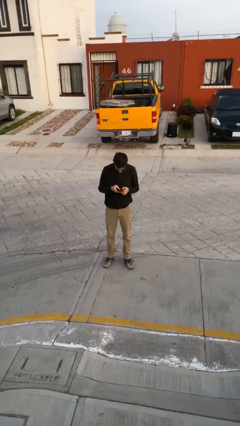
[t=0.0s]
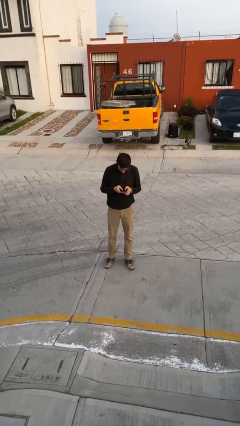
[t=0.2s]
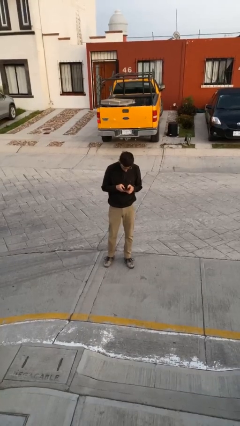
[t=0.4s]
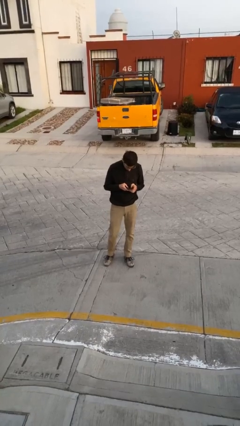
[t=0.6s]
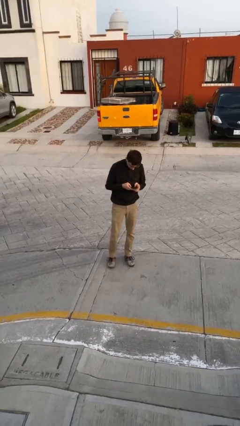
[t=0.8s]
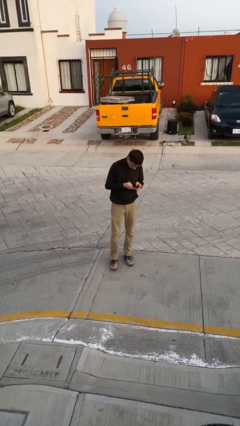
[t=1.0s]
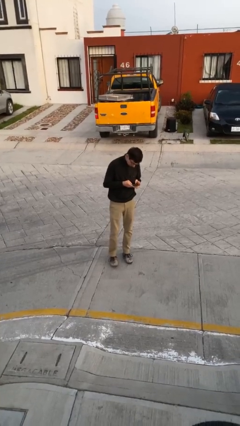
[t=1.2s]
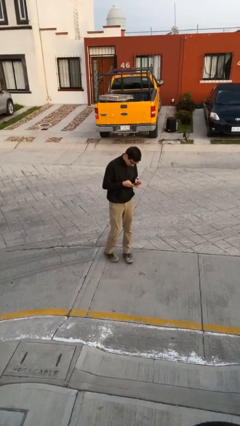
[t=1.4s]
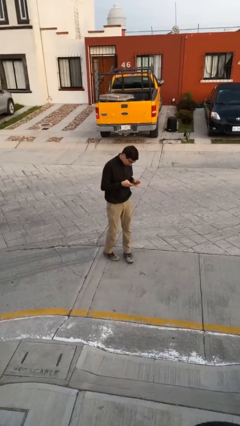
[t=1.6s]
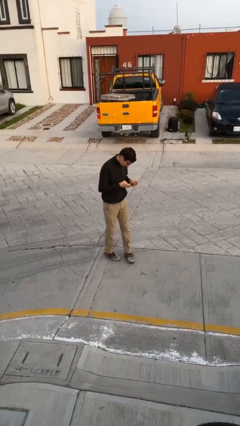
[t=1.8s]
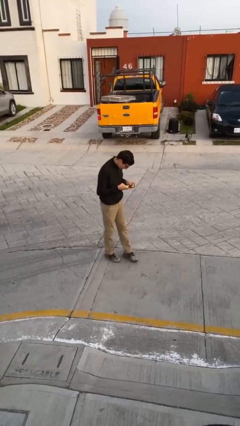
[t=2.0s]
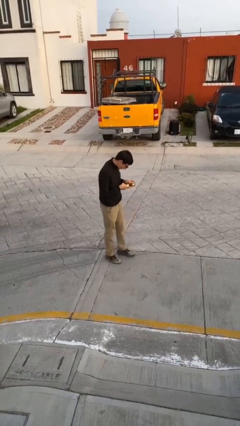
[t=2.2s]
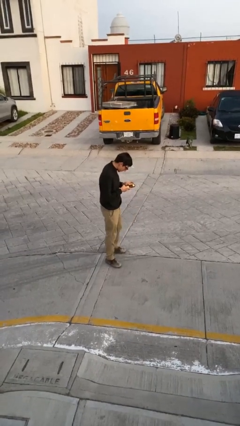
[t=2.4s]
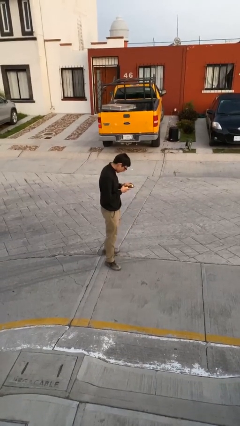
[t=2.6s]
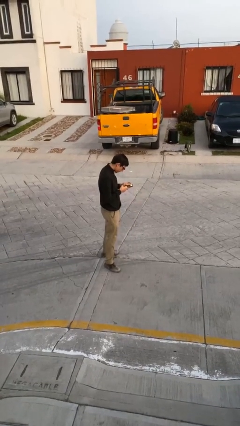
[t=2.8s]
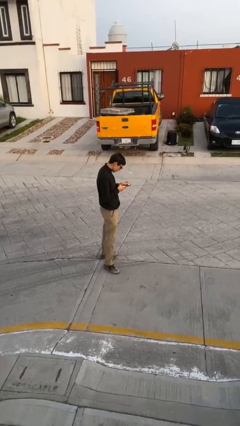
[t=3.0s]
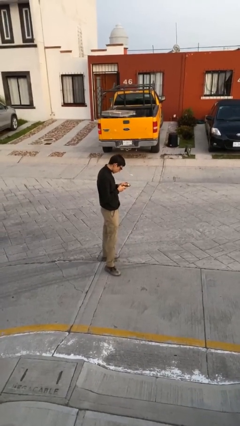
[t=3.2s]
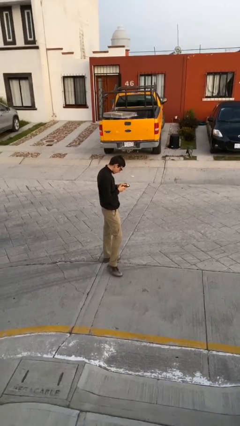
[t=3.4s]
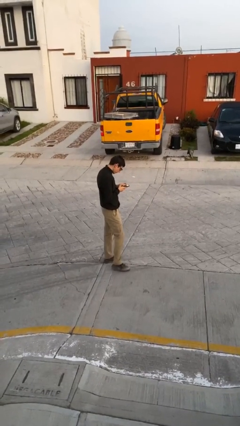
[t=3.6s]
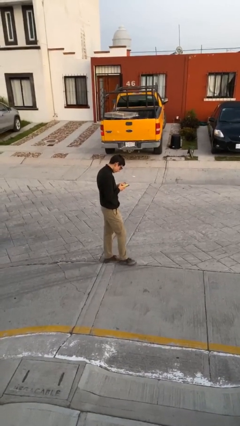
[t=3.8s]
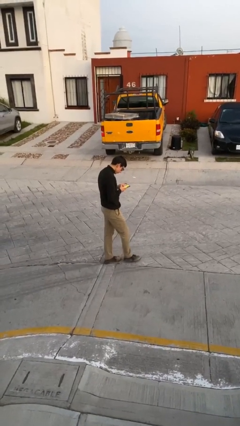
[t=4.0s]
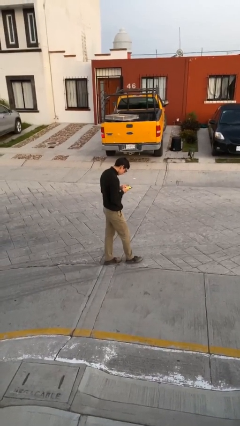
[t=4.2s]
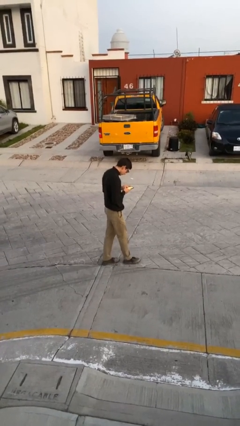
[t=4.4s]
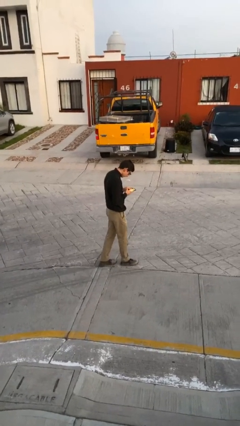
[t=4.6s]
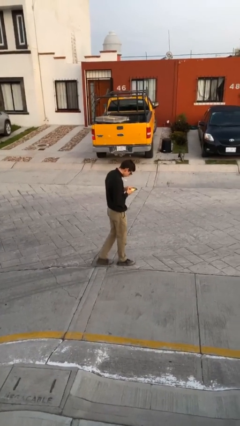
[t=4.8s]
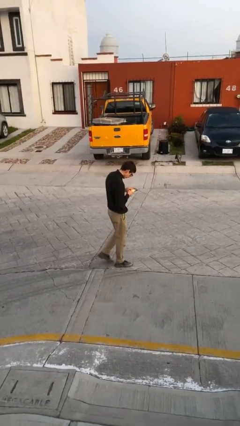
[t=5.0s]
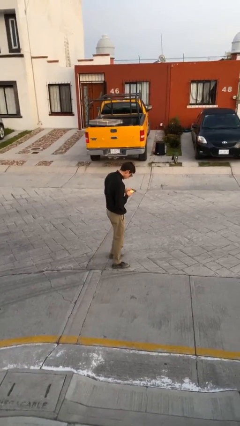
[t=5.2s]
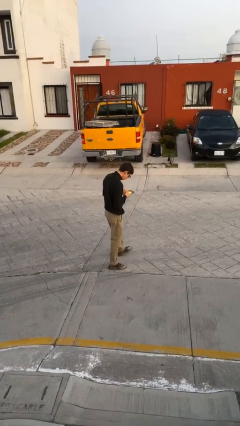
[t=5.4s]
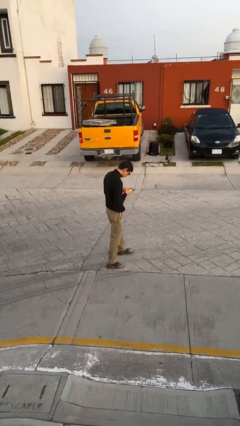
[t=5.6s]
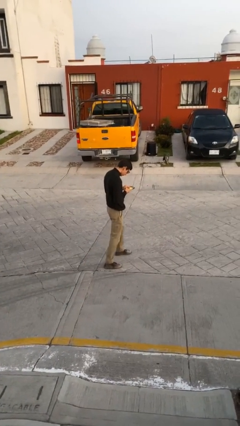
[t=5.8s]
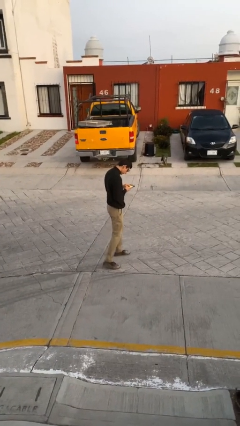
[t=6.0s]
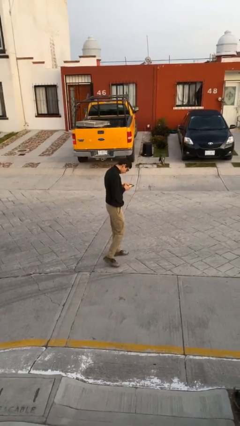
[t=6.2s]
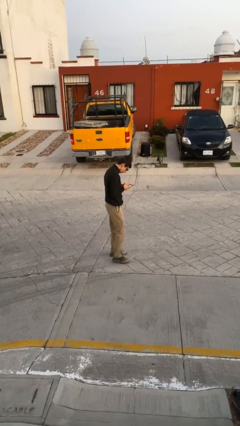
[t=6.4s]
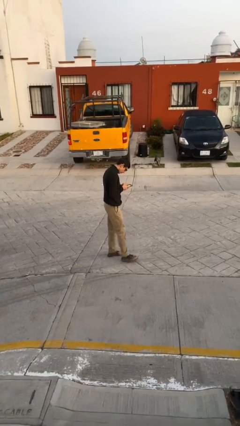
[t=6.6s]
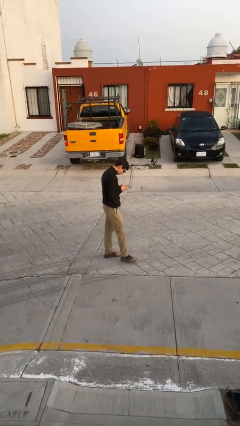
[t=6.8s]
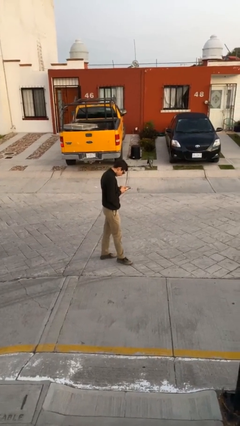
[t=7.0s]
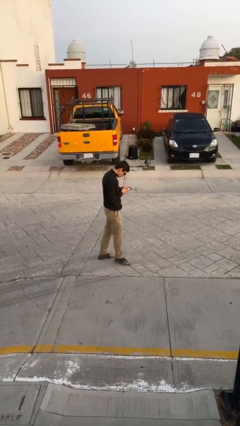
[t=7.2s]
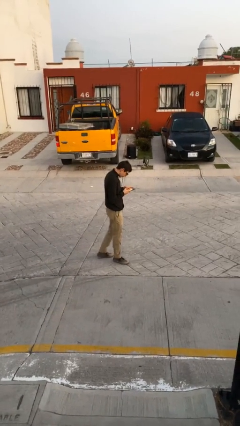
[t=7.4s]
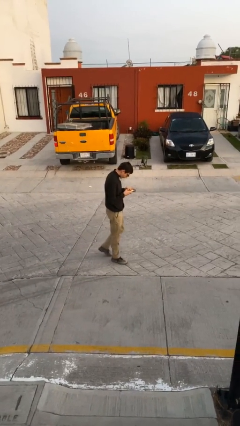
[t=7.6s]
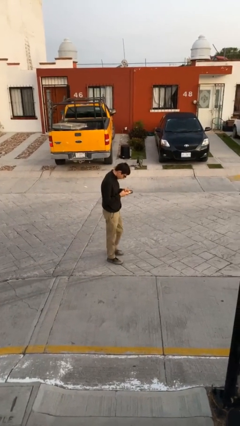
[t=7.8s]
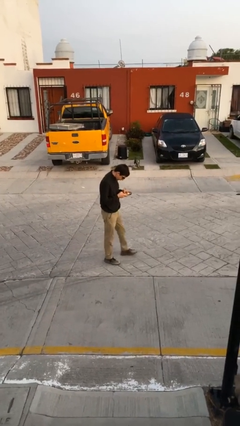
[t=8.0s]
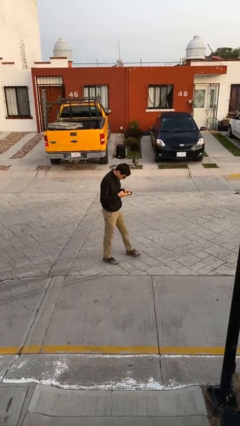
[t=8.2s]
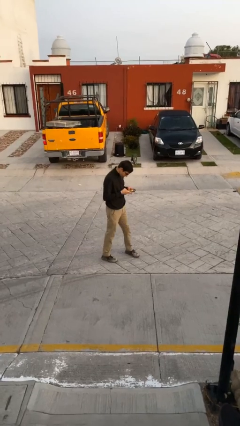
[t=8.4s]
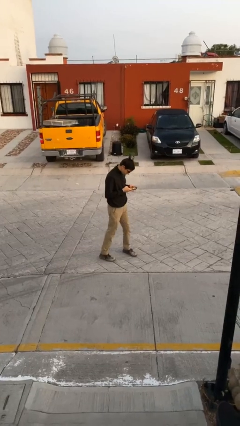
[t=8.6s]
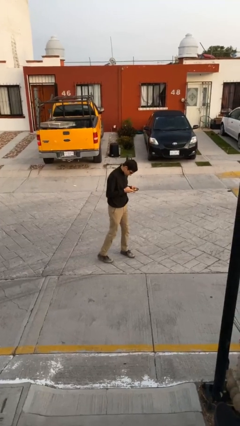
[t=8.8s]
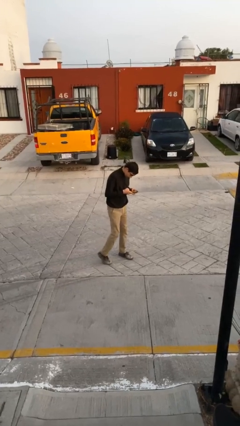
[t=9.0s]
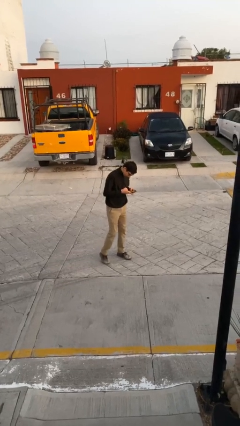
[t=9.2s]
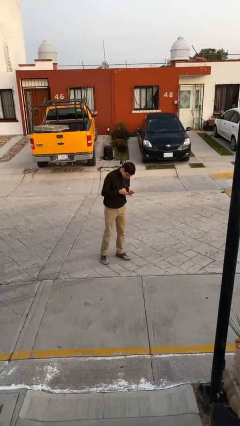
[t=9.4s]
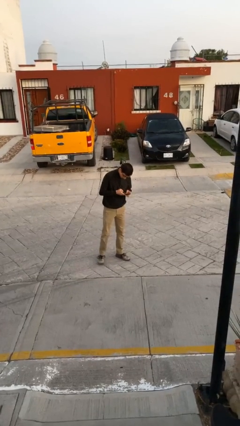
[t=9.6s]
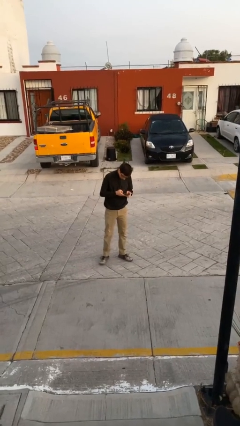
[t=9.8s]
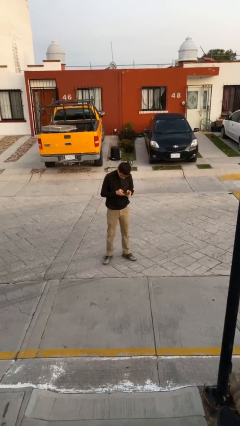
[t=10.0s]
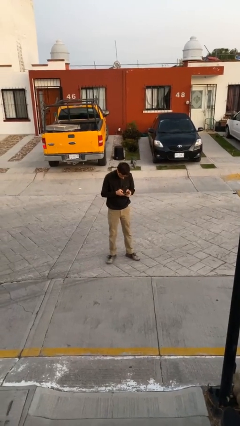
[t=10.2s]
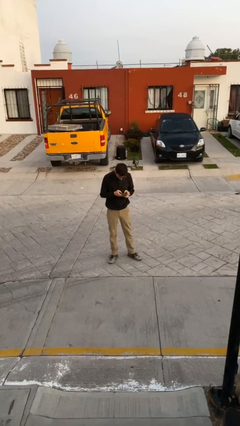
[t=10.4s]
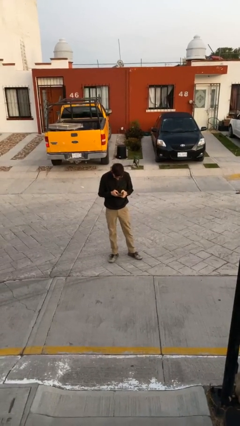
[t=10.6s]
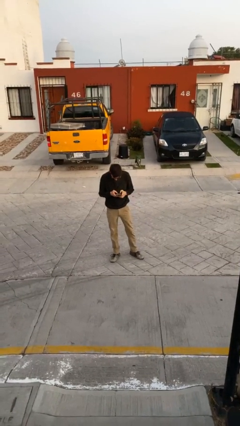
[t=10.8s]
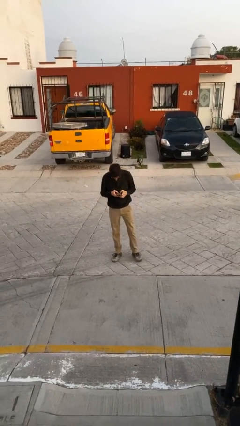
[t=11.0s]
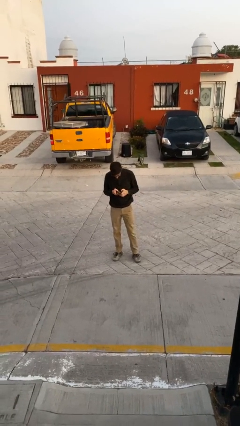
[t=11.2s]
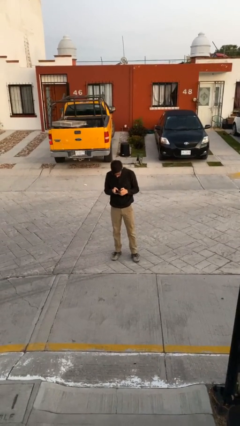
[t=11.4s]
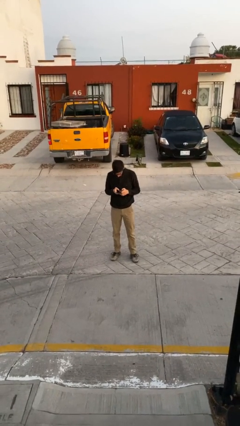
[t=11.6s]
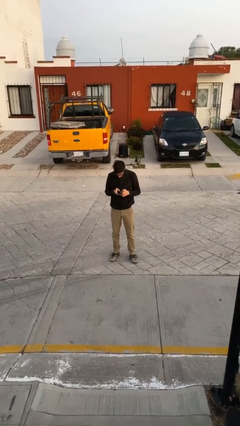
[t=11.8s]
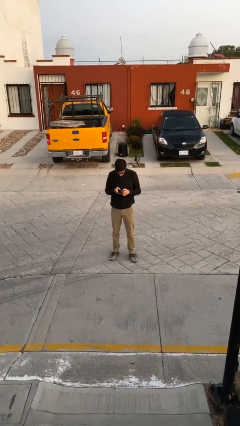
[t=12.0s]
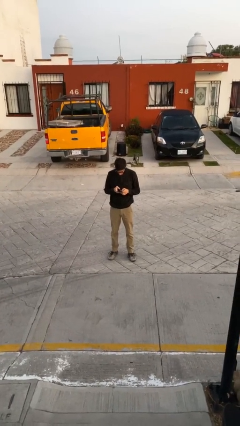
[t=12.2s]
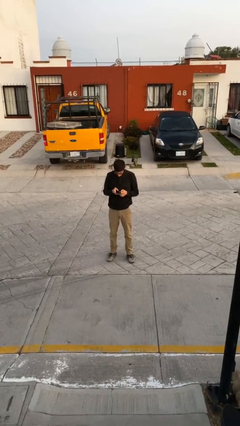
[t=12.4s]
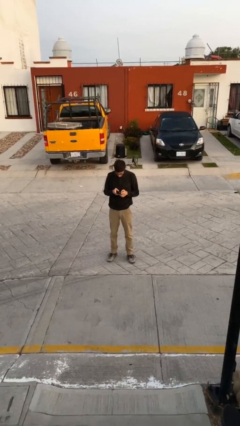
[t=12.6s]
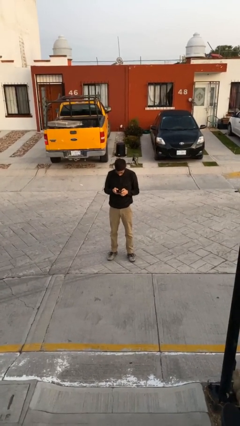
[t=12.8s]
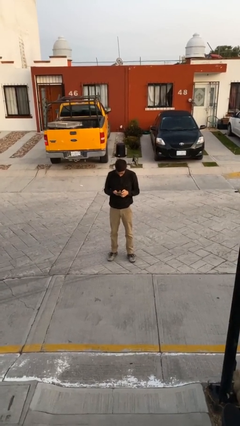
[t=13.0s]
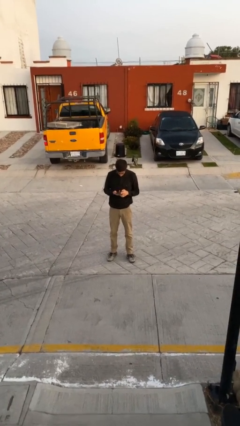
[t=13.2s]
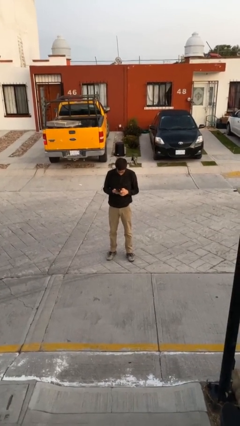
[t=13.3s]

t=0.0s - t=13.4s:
person texts on phone

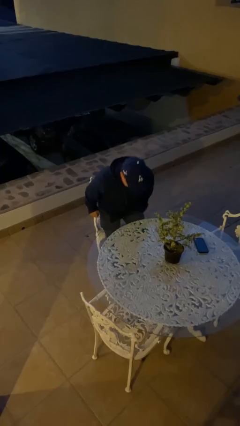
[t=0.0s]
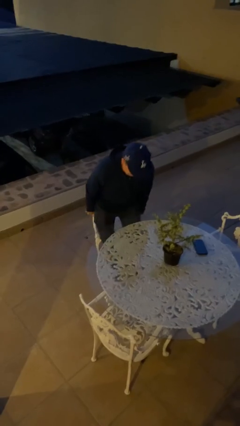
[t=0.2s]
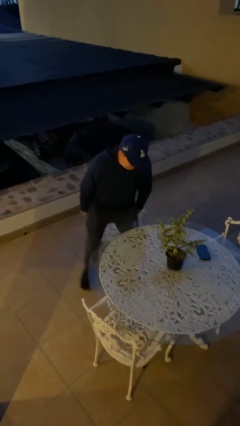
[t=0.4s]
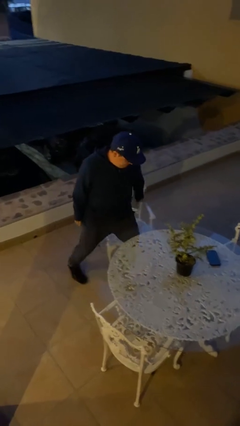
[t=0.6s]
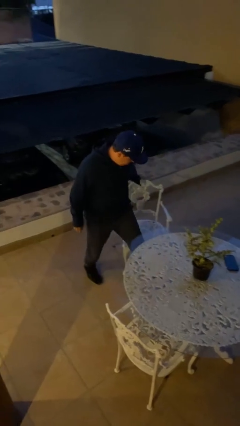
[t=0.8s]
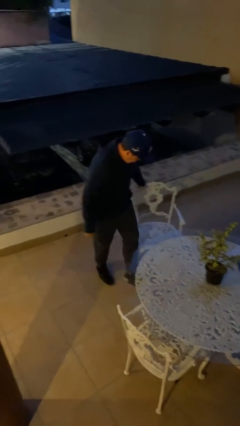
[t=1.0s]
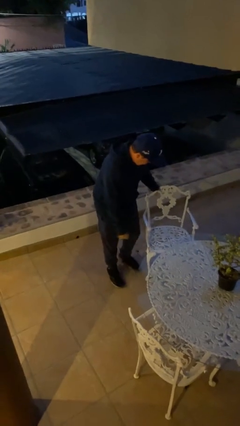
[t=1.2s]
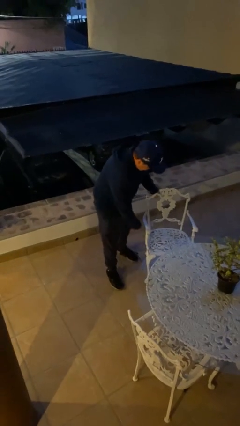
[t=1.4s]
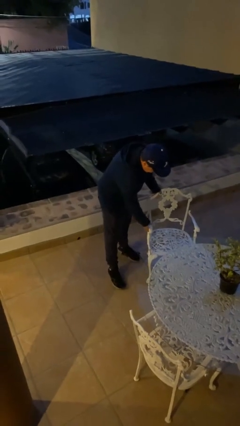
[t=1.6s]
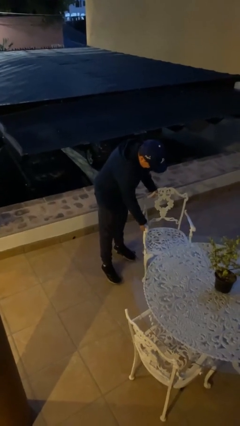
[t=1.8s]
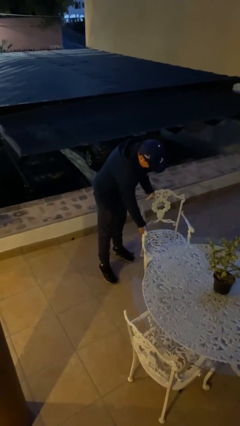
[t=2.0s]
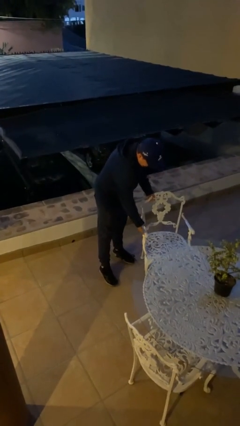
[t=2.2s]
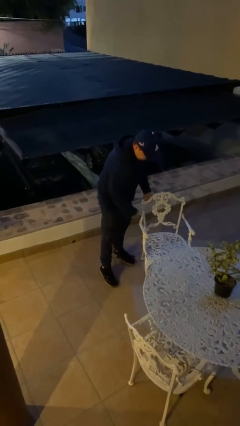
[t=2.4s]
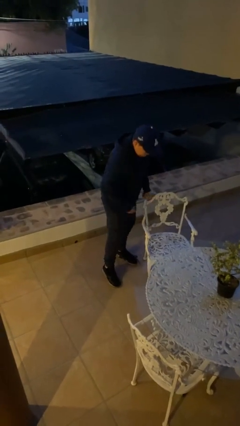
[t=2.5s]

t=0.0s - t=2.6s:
person stands up

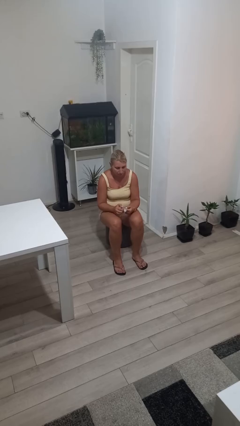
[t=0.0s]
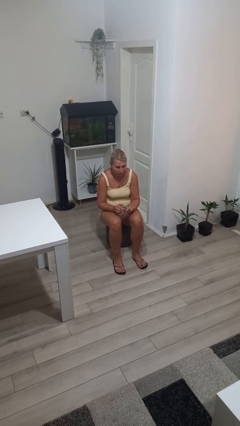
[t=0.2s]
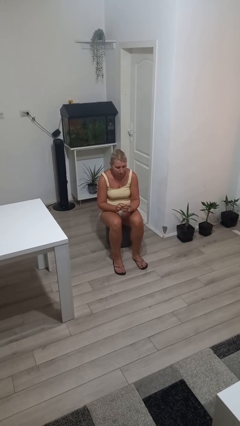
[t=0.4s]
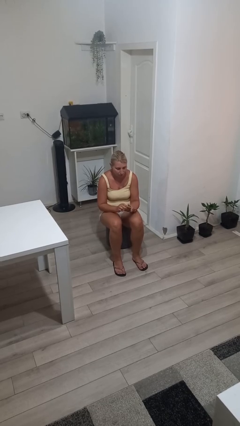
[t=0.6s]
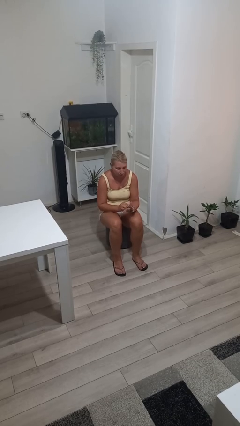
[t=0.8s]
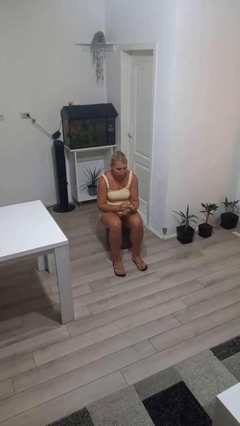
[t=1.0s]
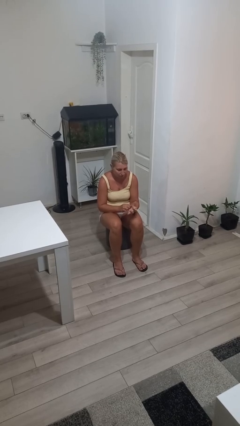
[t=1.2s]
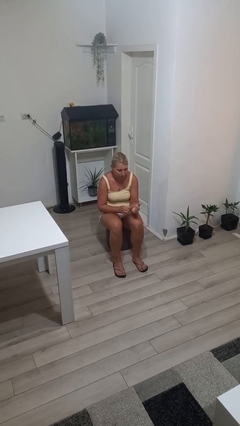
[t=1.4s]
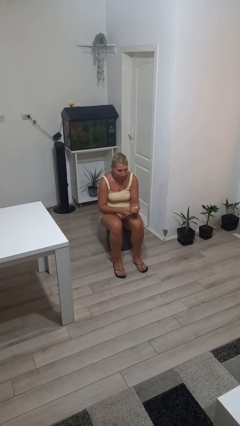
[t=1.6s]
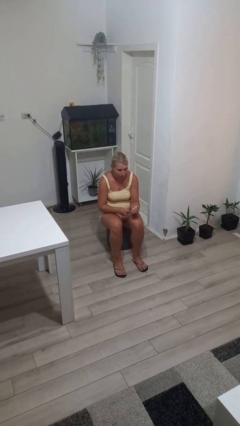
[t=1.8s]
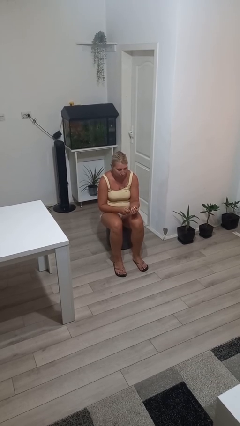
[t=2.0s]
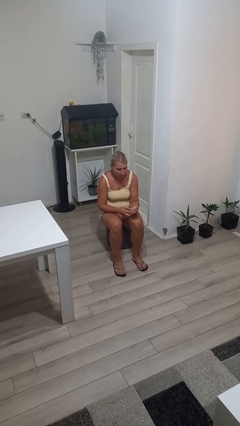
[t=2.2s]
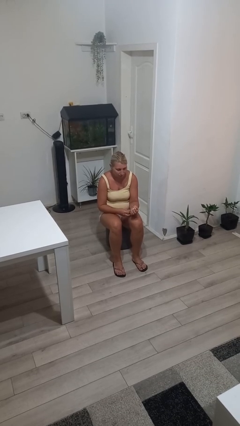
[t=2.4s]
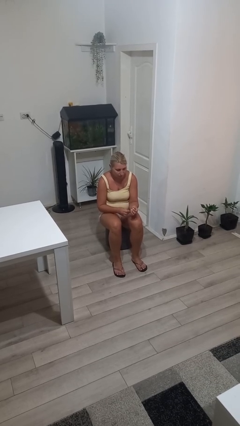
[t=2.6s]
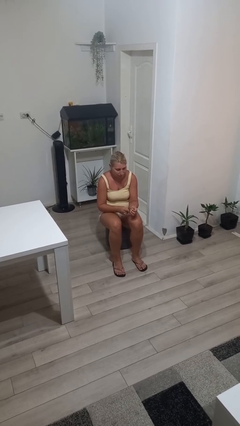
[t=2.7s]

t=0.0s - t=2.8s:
person puts on wristwatch
